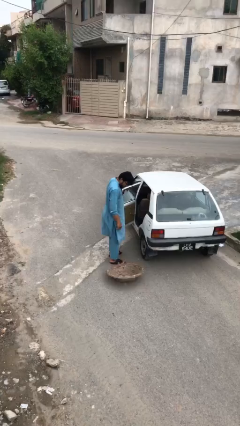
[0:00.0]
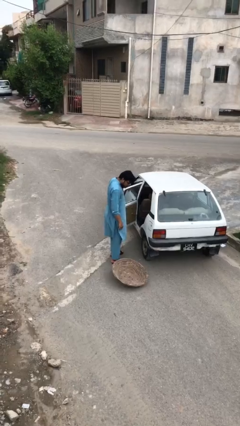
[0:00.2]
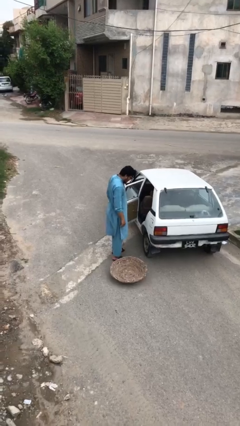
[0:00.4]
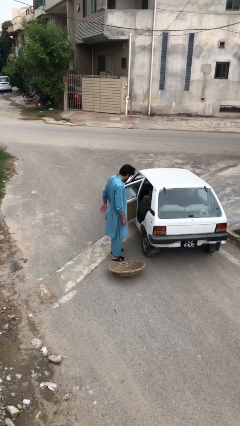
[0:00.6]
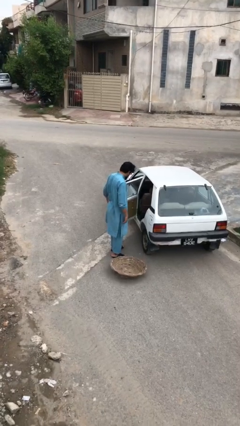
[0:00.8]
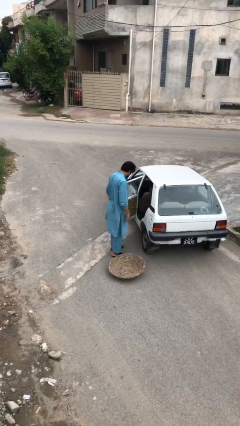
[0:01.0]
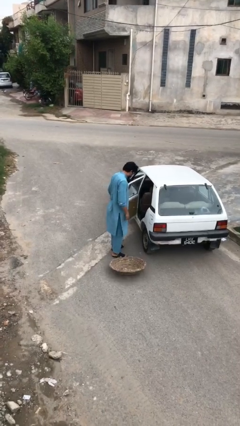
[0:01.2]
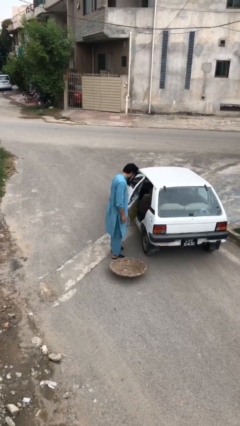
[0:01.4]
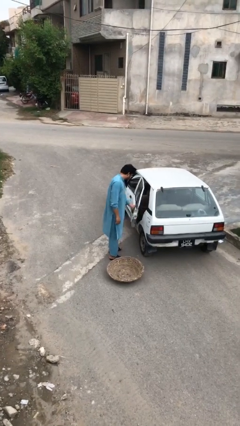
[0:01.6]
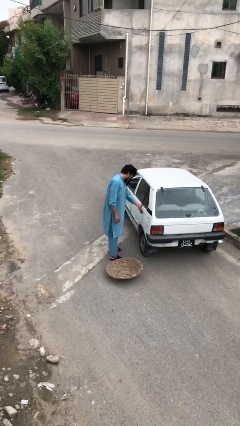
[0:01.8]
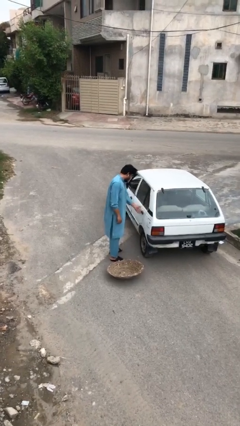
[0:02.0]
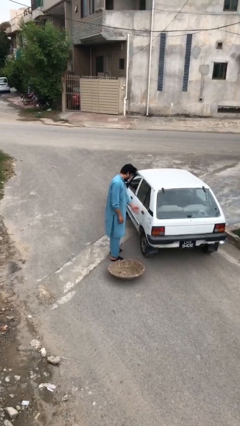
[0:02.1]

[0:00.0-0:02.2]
person closes car door

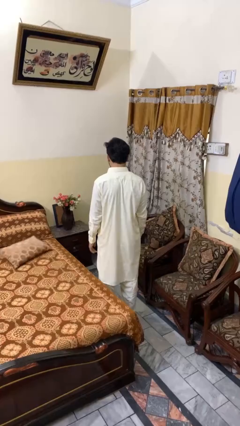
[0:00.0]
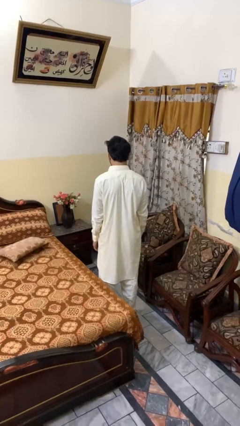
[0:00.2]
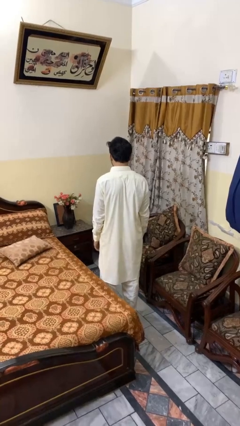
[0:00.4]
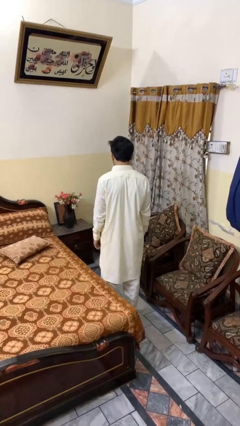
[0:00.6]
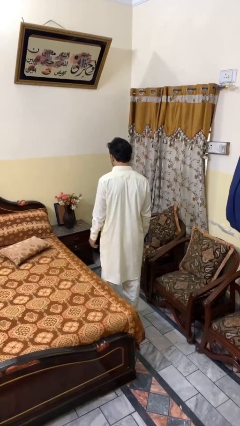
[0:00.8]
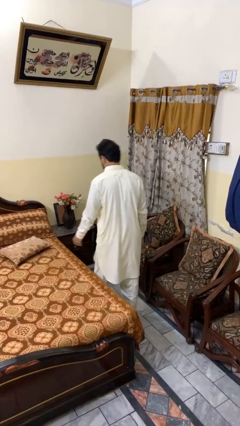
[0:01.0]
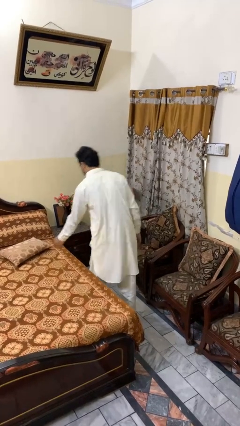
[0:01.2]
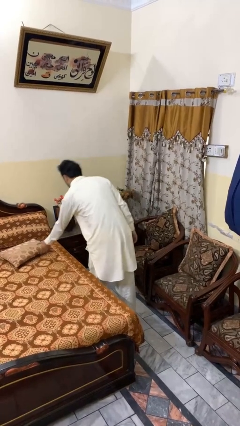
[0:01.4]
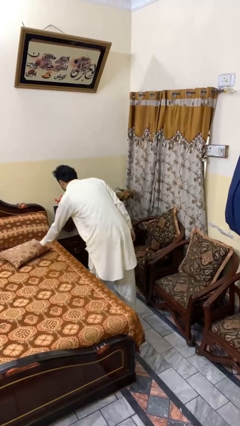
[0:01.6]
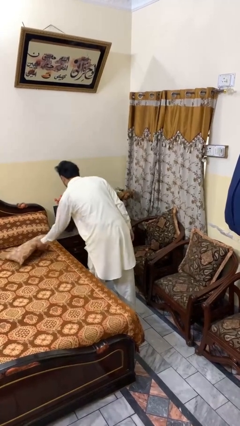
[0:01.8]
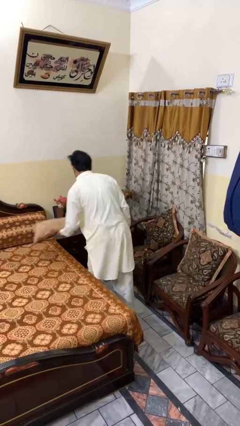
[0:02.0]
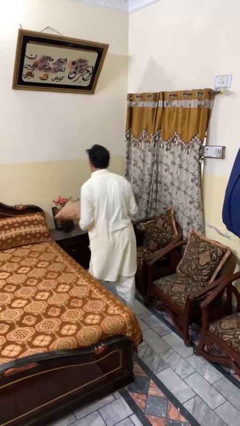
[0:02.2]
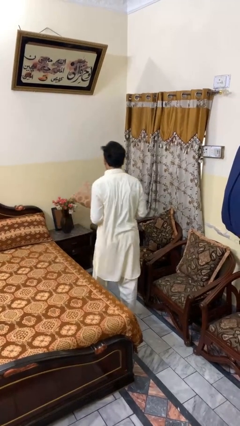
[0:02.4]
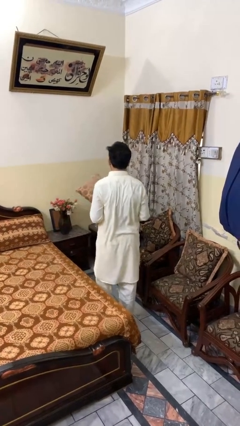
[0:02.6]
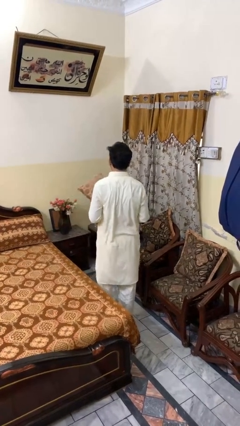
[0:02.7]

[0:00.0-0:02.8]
person picks up object from bed

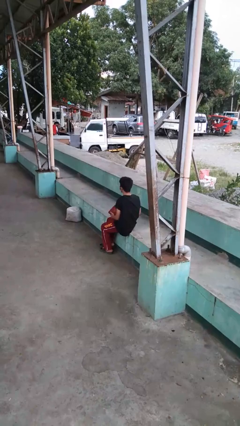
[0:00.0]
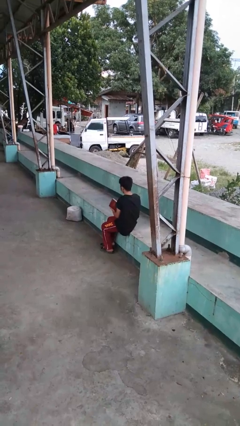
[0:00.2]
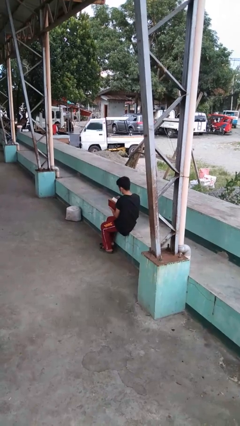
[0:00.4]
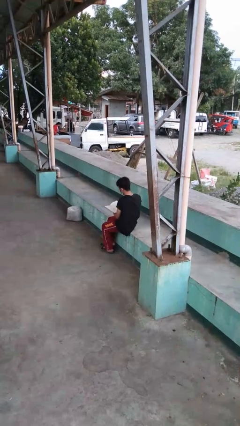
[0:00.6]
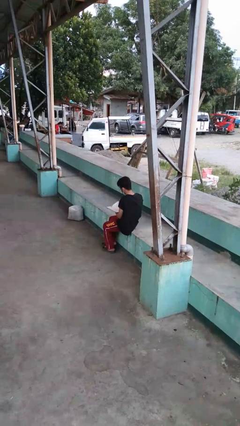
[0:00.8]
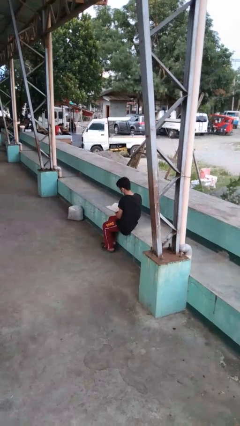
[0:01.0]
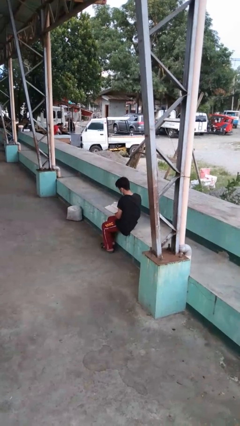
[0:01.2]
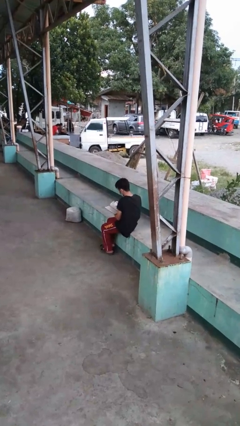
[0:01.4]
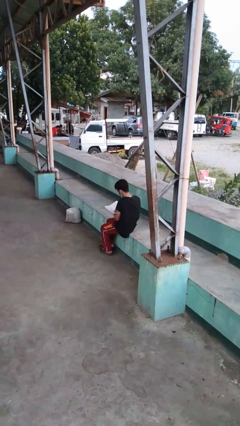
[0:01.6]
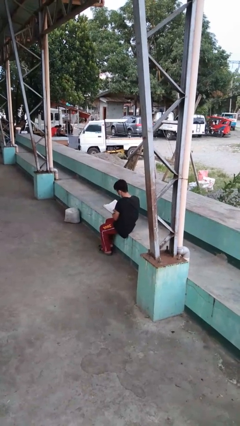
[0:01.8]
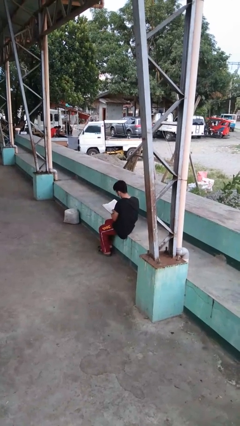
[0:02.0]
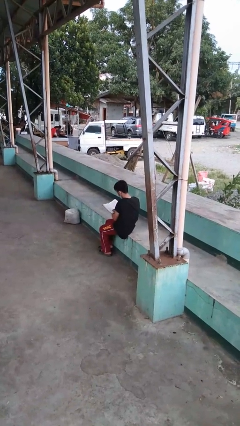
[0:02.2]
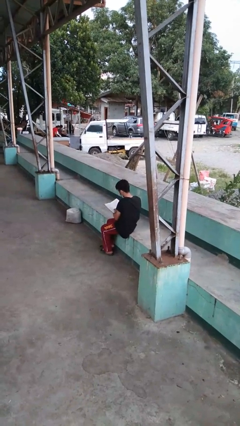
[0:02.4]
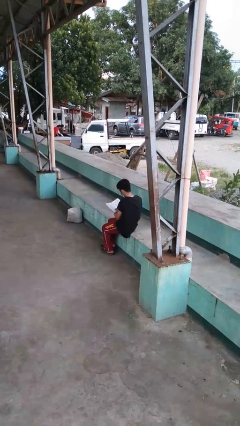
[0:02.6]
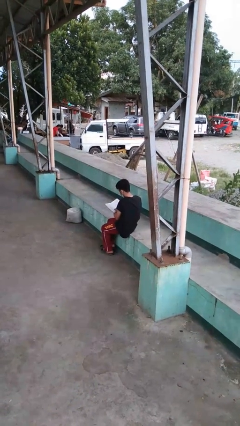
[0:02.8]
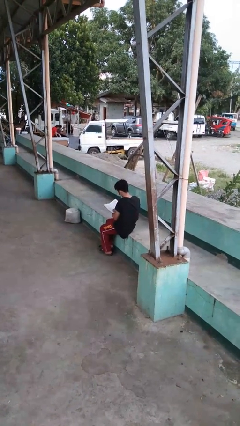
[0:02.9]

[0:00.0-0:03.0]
person reads book

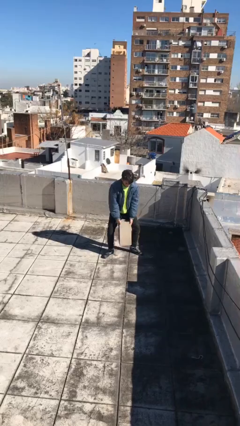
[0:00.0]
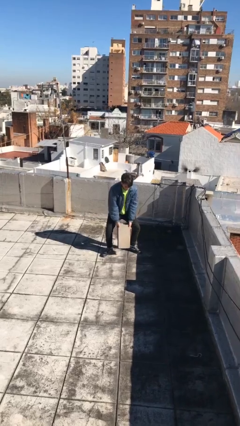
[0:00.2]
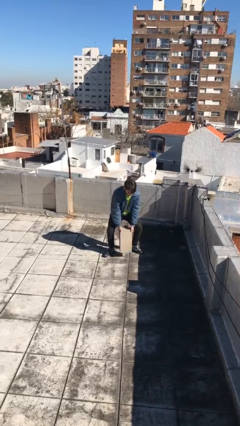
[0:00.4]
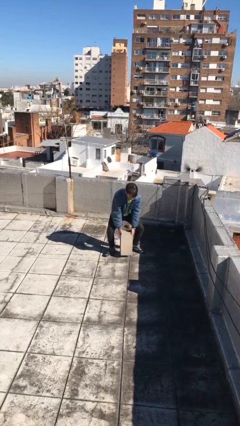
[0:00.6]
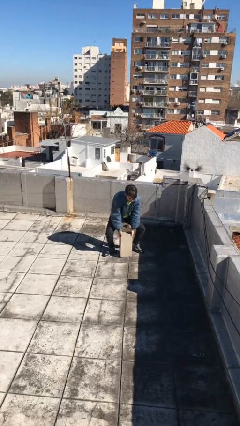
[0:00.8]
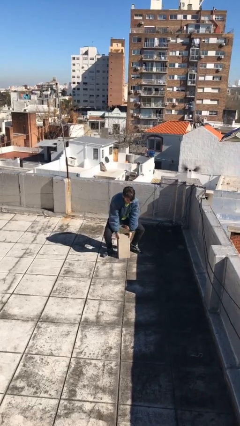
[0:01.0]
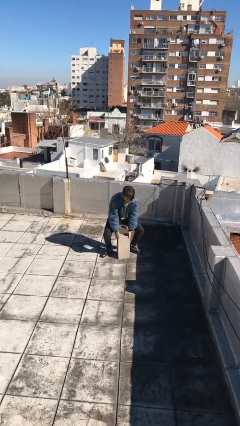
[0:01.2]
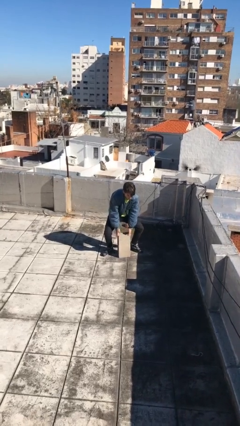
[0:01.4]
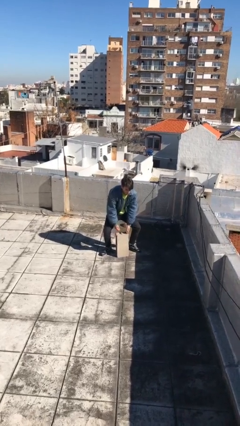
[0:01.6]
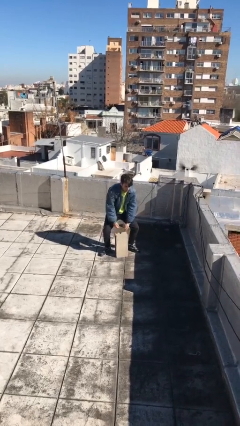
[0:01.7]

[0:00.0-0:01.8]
person puts down object on floor

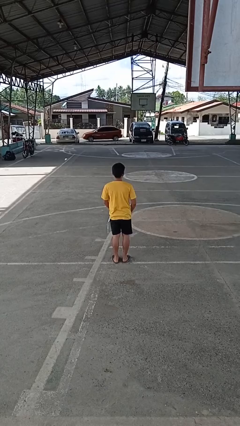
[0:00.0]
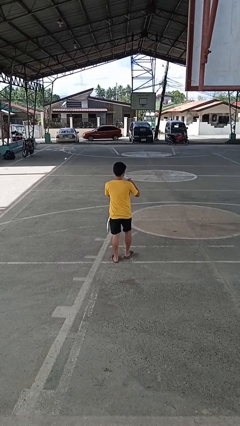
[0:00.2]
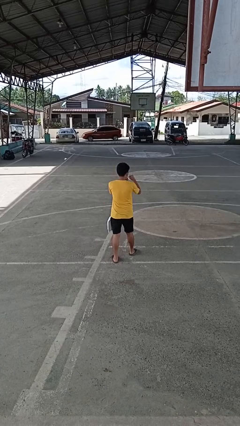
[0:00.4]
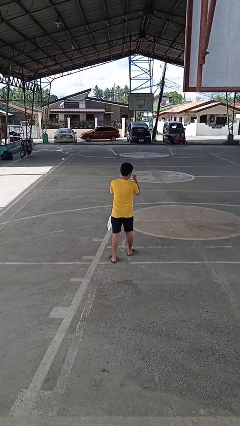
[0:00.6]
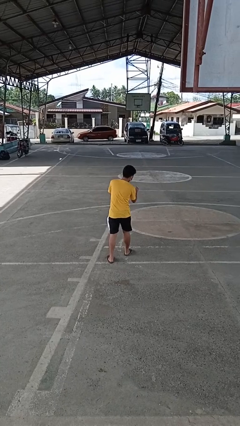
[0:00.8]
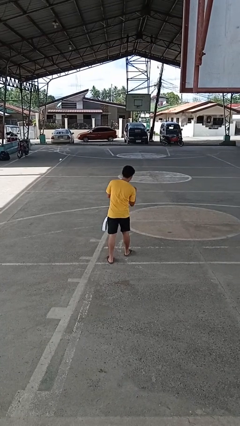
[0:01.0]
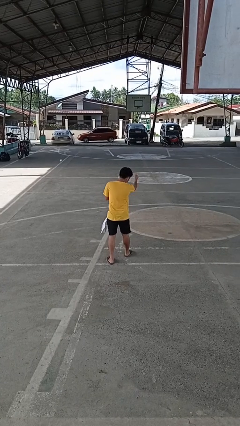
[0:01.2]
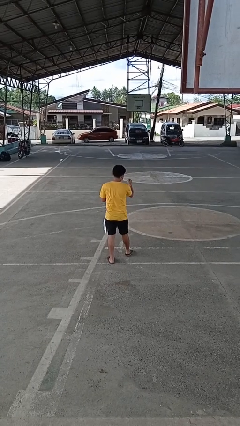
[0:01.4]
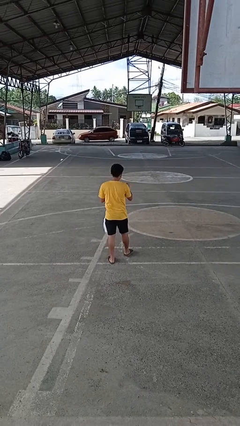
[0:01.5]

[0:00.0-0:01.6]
person punches

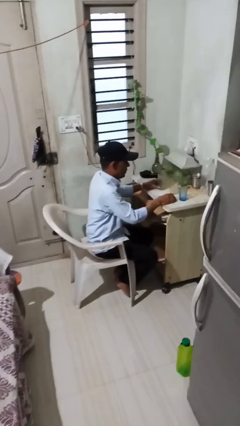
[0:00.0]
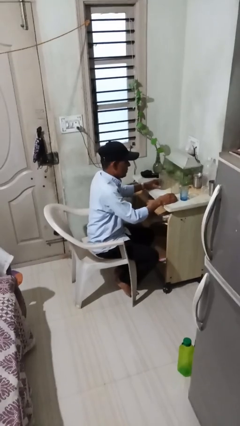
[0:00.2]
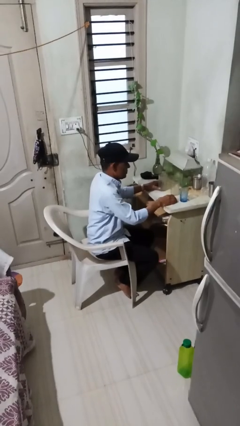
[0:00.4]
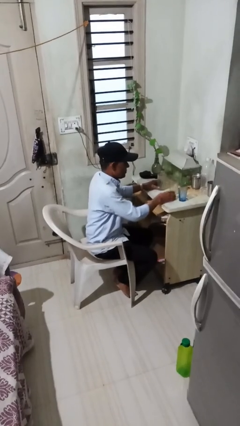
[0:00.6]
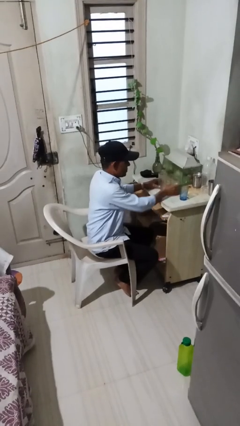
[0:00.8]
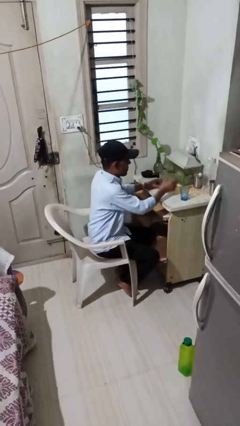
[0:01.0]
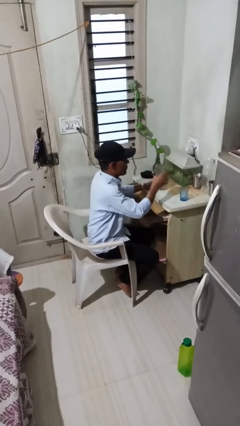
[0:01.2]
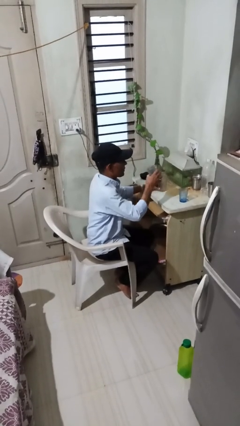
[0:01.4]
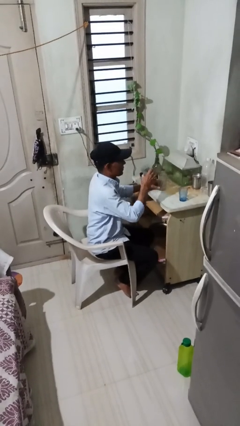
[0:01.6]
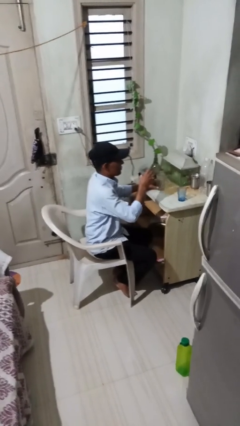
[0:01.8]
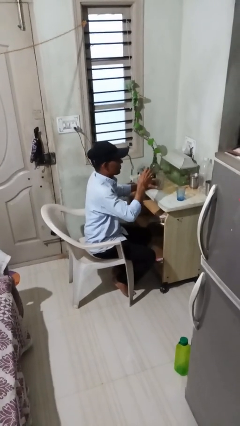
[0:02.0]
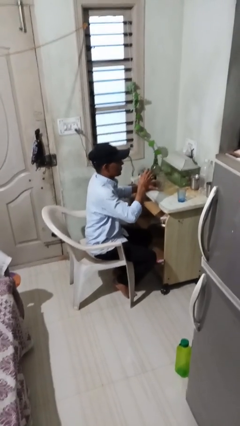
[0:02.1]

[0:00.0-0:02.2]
person picks up object from table

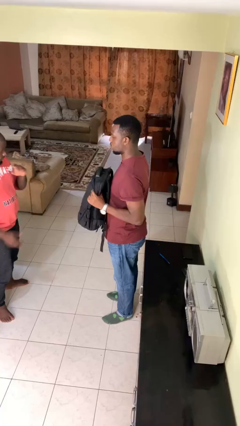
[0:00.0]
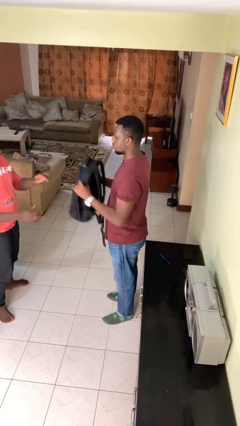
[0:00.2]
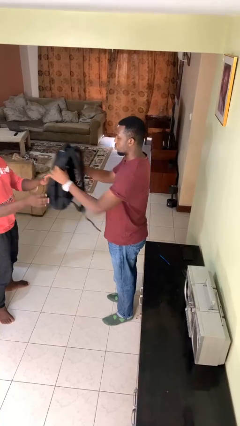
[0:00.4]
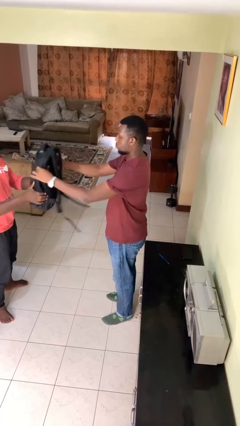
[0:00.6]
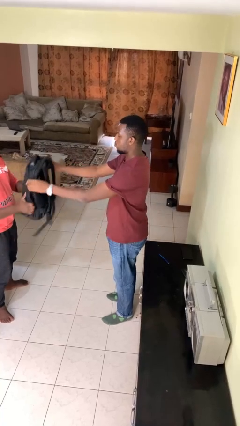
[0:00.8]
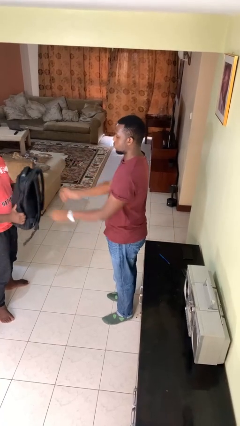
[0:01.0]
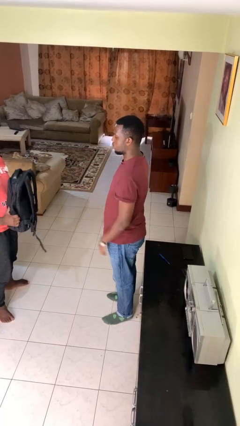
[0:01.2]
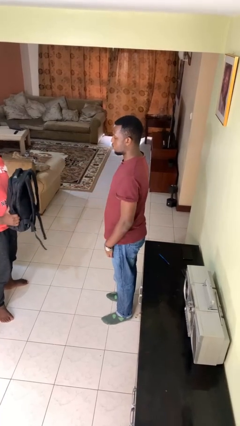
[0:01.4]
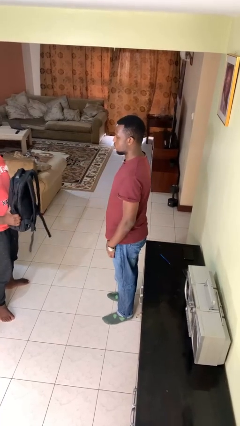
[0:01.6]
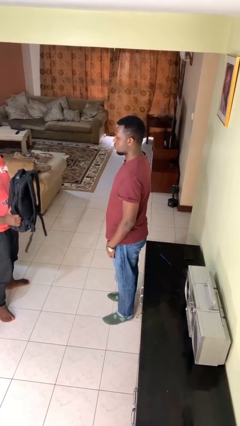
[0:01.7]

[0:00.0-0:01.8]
person transfers object to person

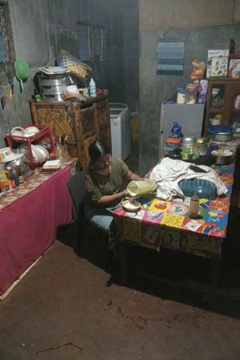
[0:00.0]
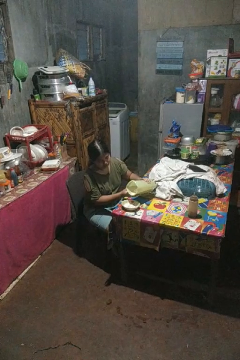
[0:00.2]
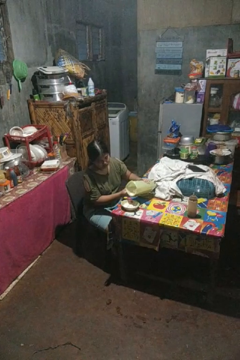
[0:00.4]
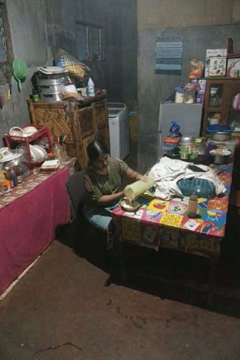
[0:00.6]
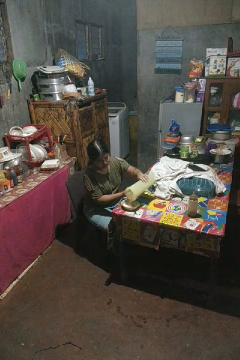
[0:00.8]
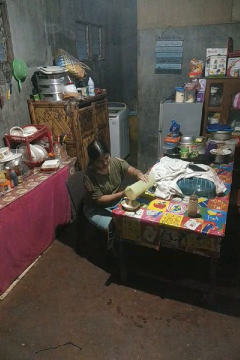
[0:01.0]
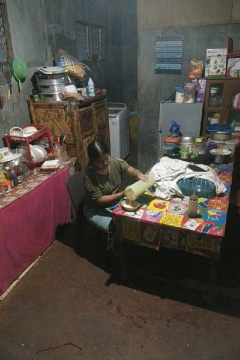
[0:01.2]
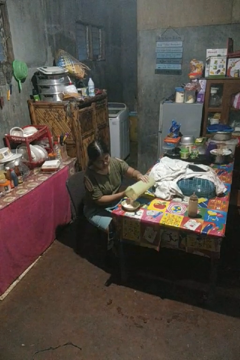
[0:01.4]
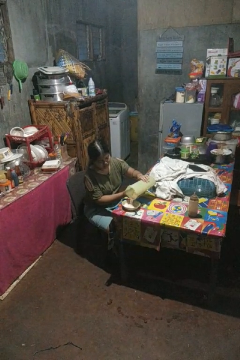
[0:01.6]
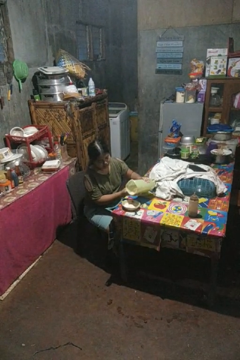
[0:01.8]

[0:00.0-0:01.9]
person pours into bowl
